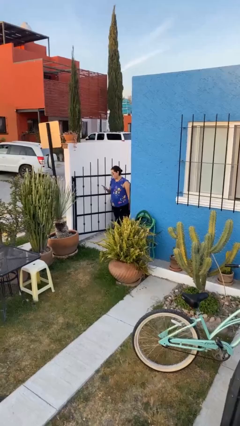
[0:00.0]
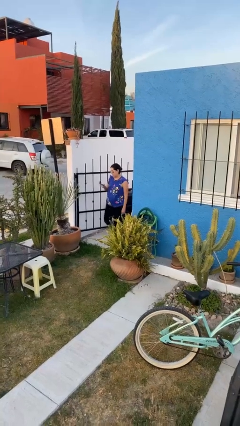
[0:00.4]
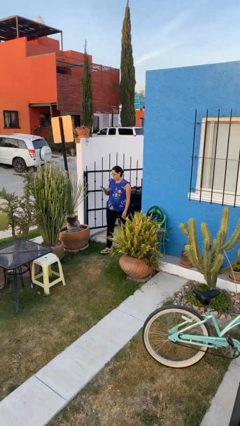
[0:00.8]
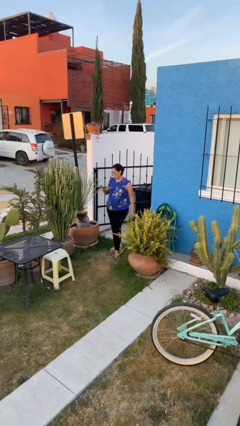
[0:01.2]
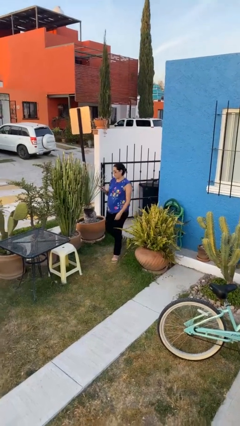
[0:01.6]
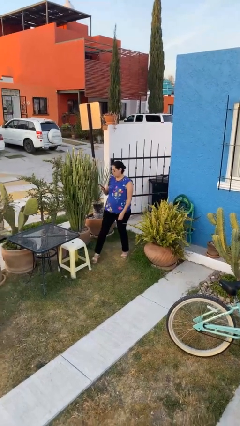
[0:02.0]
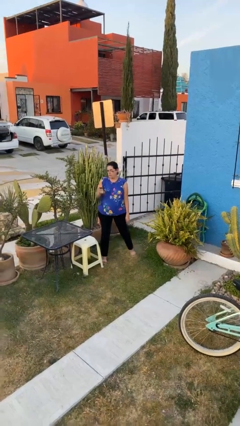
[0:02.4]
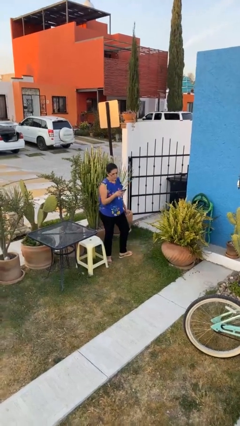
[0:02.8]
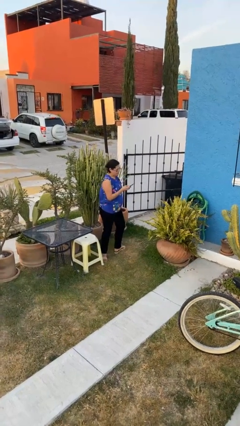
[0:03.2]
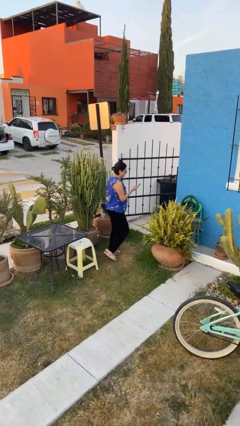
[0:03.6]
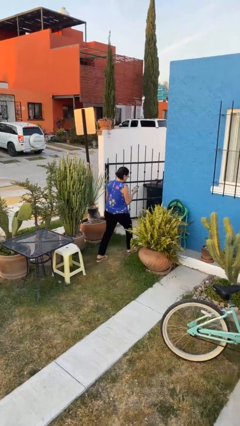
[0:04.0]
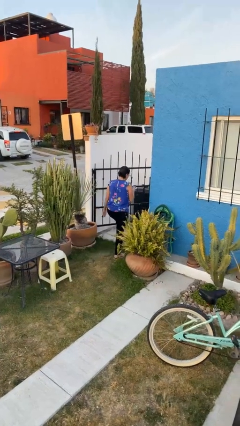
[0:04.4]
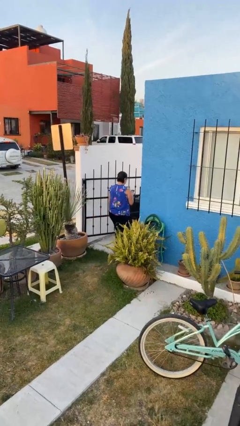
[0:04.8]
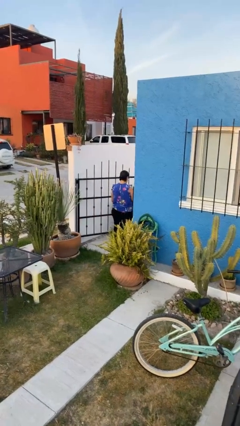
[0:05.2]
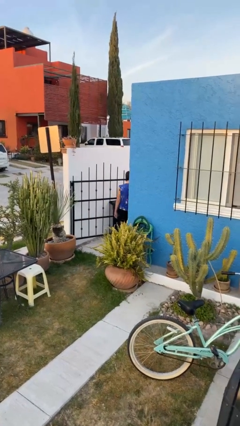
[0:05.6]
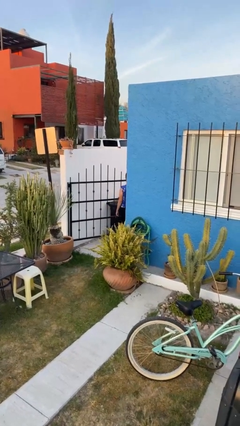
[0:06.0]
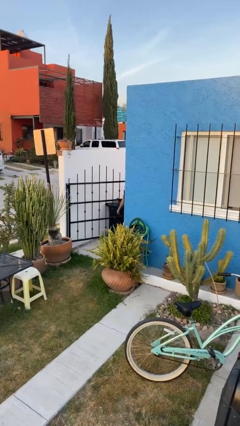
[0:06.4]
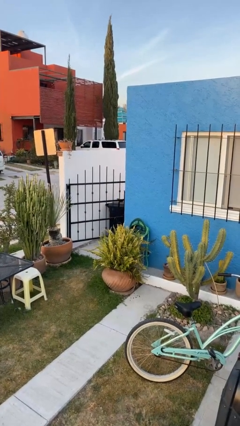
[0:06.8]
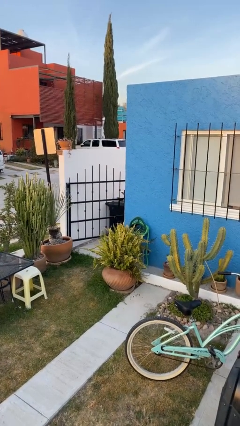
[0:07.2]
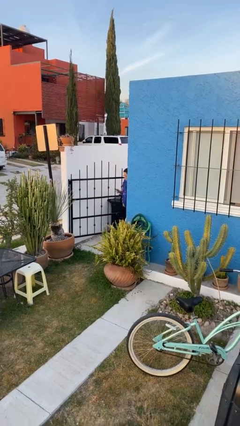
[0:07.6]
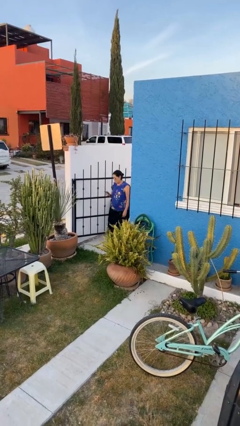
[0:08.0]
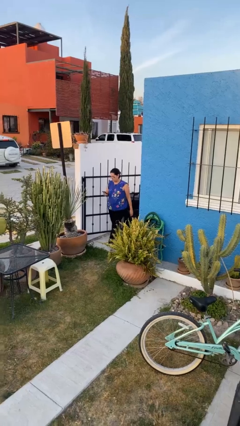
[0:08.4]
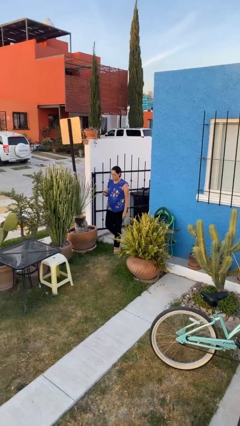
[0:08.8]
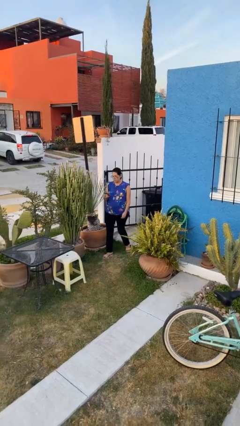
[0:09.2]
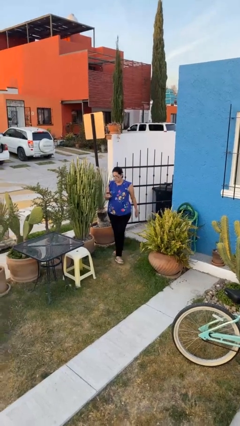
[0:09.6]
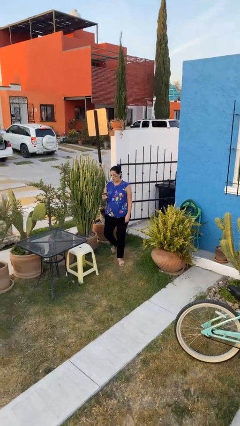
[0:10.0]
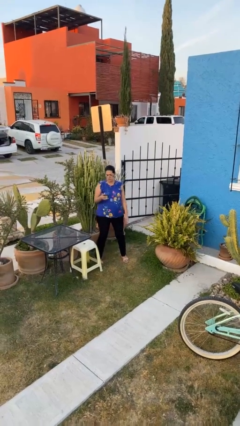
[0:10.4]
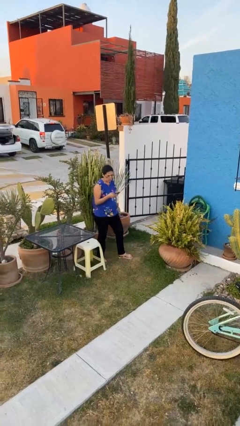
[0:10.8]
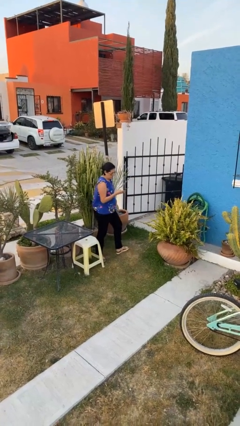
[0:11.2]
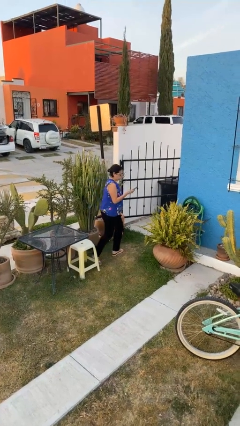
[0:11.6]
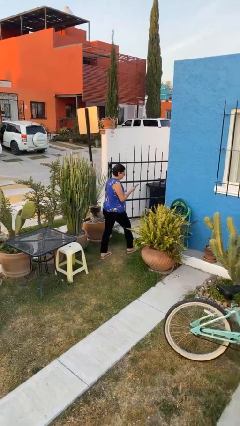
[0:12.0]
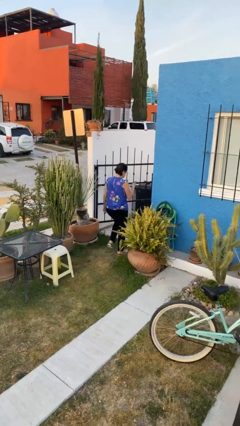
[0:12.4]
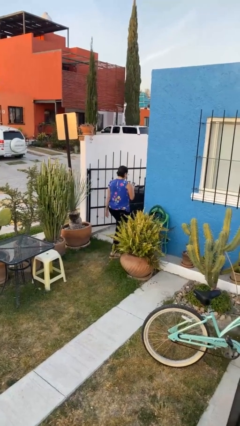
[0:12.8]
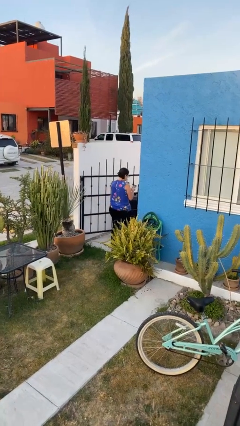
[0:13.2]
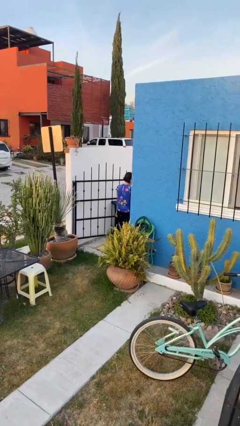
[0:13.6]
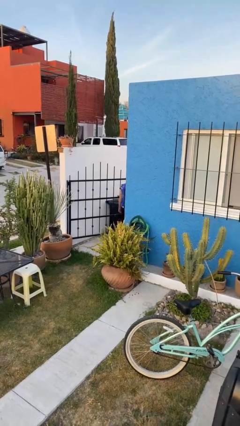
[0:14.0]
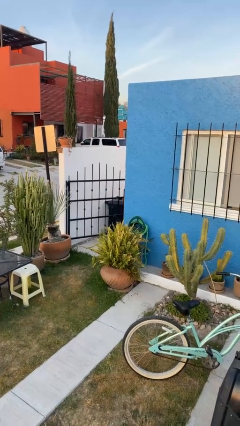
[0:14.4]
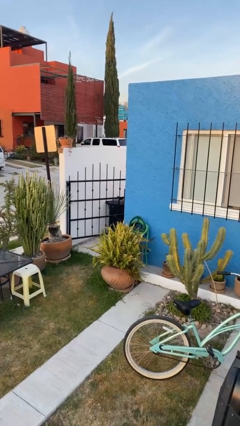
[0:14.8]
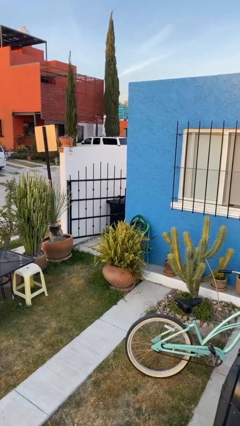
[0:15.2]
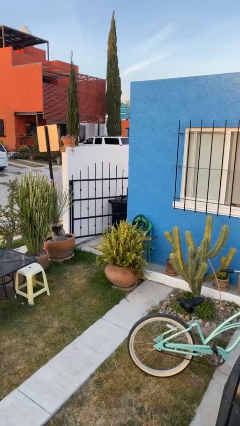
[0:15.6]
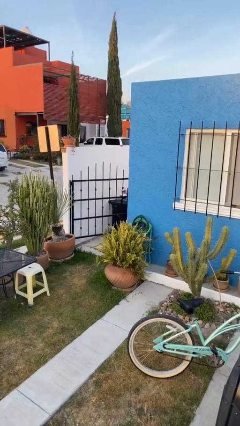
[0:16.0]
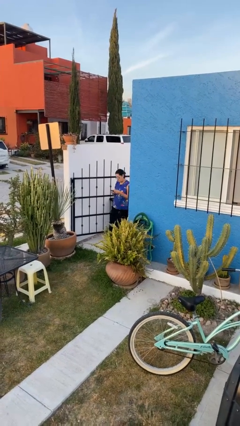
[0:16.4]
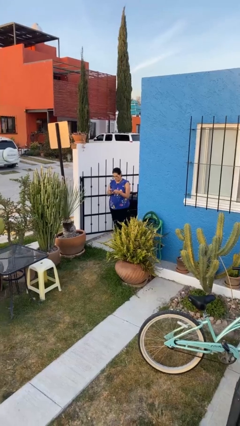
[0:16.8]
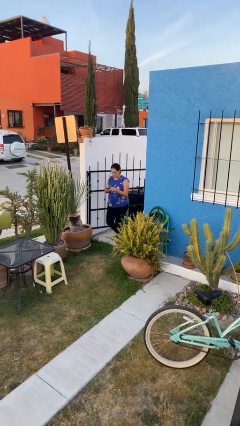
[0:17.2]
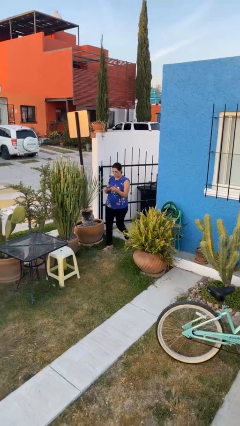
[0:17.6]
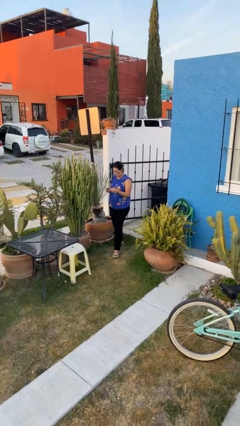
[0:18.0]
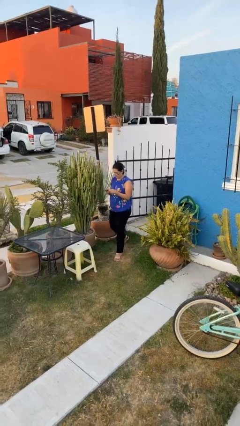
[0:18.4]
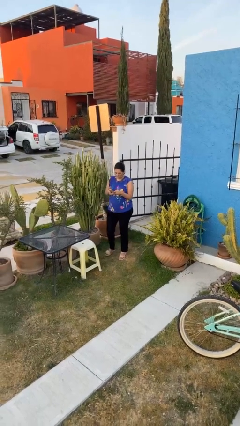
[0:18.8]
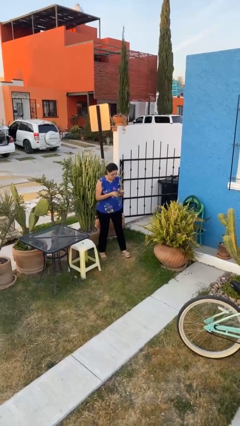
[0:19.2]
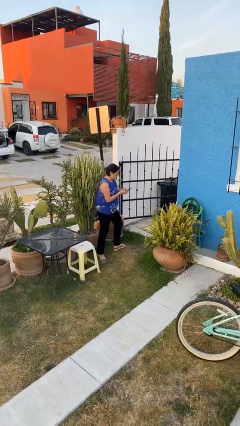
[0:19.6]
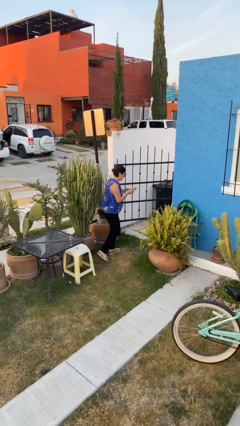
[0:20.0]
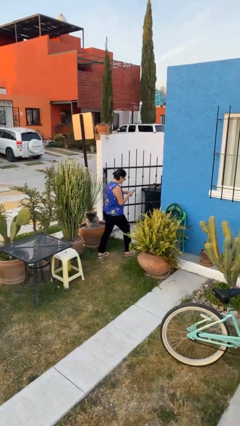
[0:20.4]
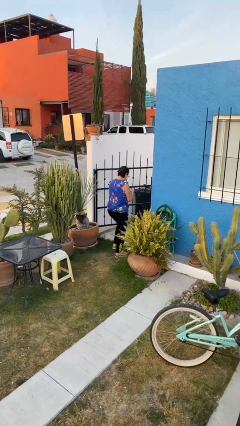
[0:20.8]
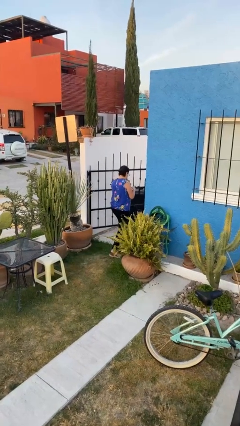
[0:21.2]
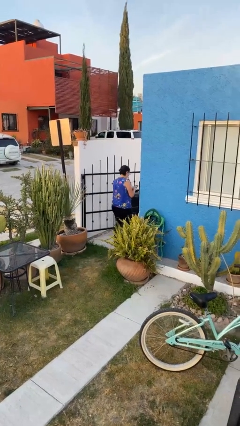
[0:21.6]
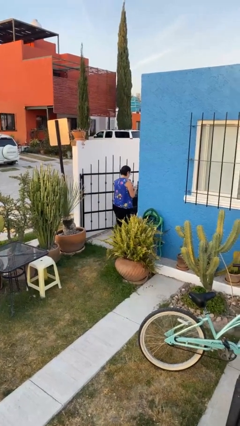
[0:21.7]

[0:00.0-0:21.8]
person texts on phone

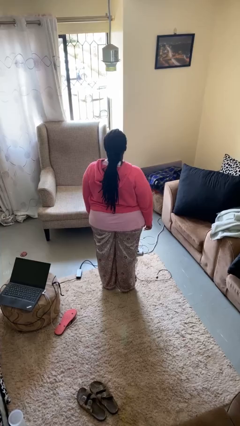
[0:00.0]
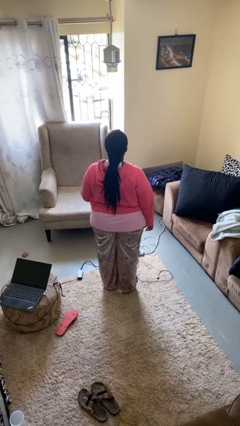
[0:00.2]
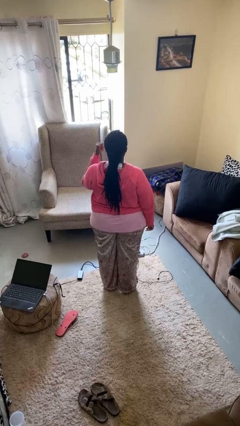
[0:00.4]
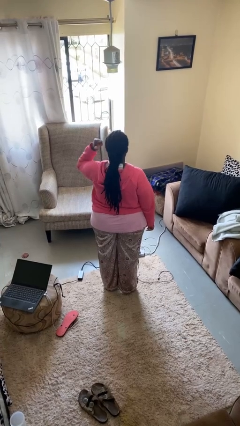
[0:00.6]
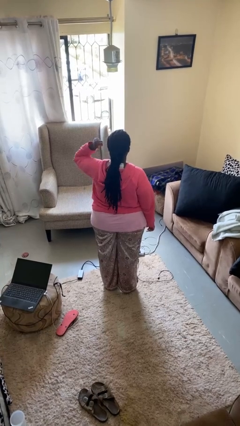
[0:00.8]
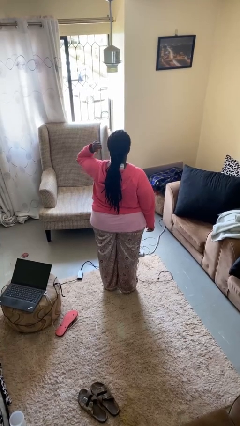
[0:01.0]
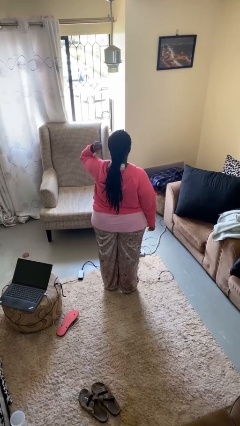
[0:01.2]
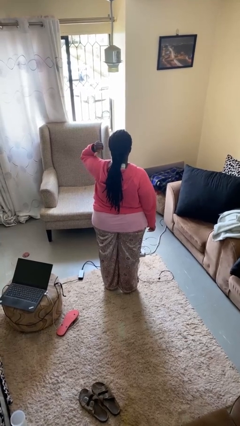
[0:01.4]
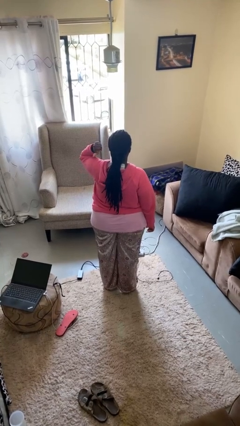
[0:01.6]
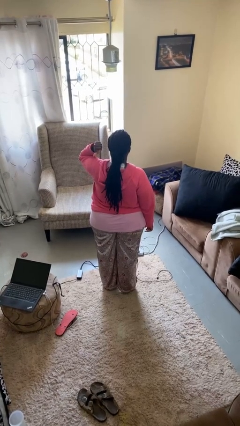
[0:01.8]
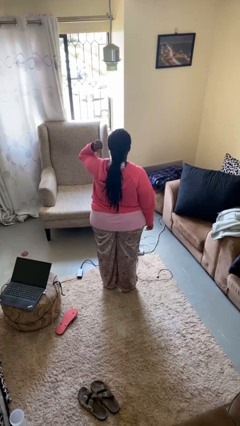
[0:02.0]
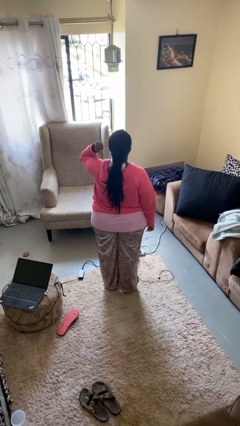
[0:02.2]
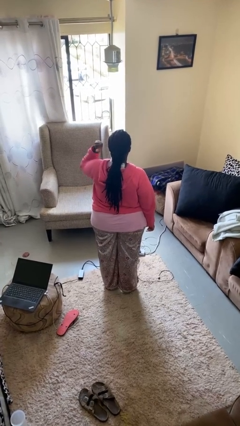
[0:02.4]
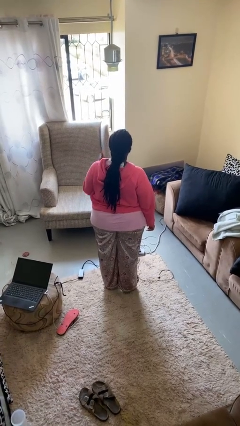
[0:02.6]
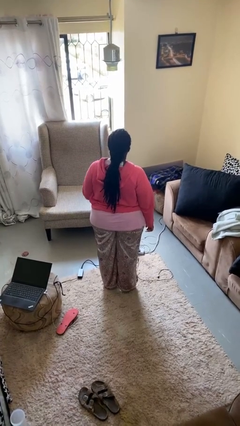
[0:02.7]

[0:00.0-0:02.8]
person gestures behind me

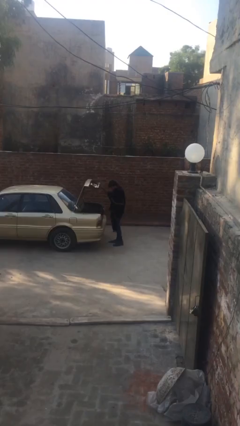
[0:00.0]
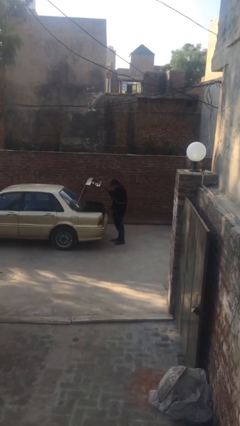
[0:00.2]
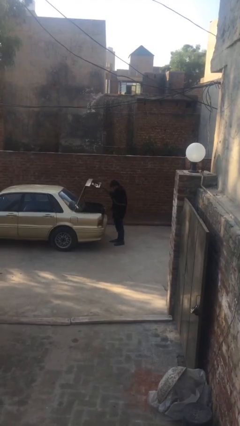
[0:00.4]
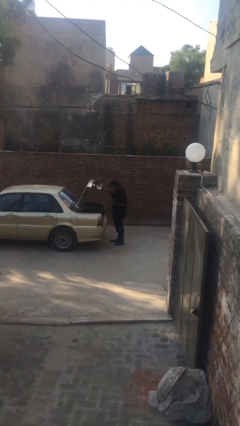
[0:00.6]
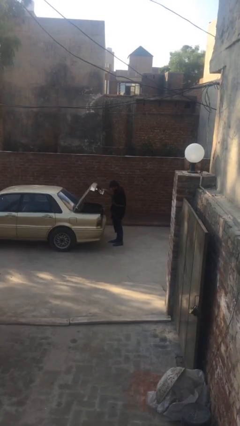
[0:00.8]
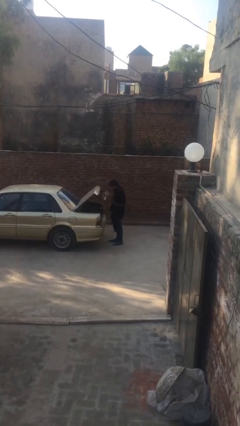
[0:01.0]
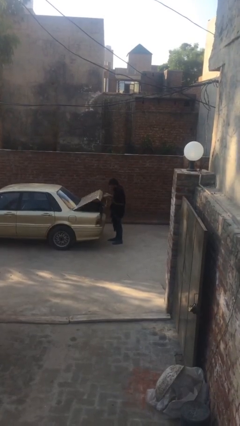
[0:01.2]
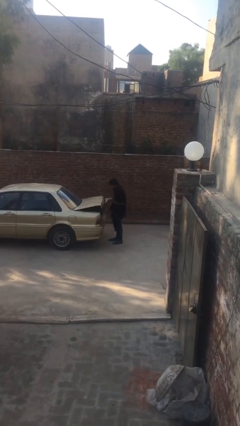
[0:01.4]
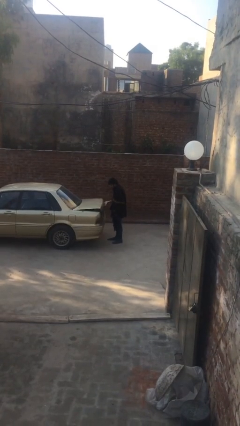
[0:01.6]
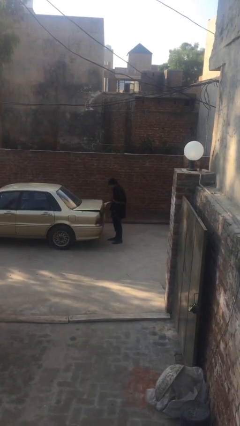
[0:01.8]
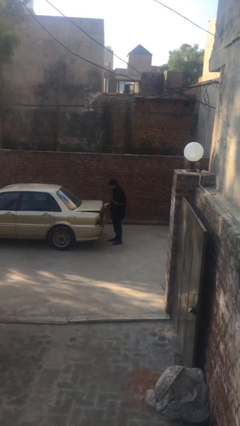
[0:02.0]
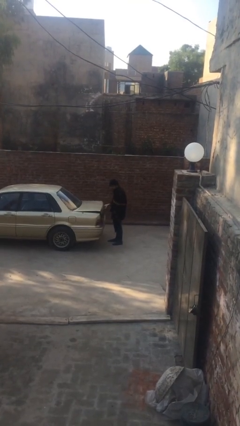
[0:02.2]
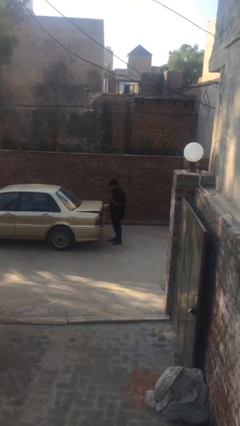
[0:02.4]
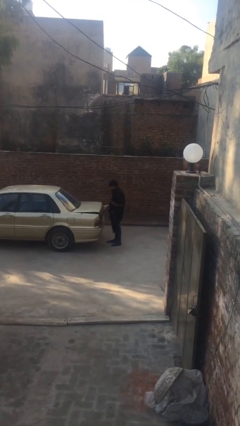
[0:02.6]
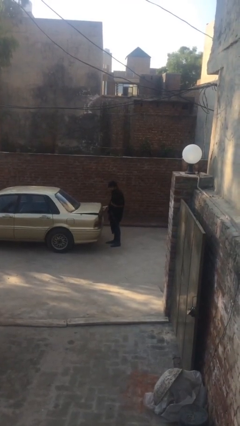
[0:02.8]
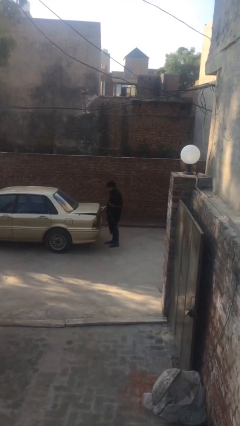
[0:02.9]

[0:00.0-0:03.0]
person closes car trunk

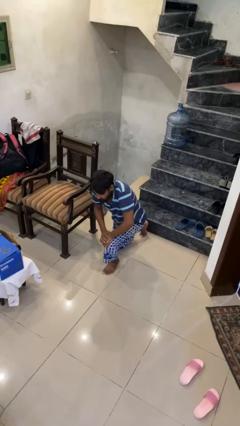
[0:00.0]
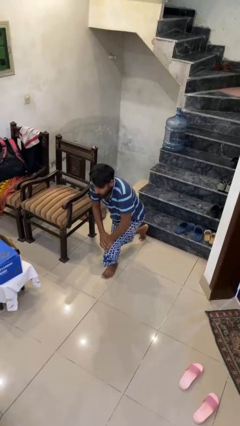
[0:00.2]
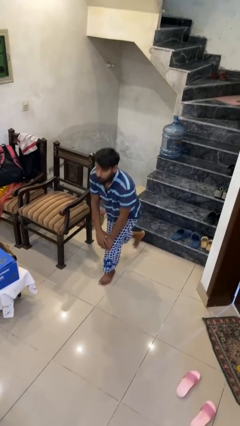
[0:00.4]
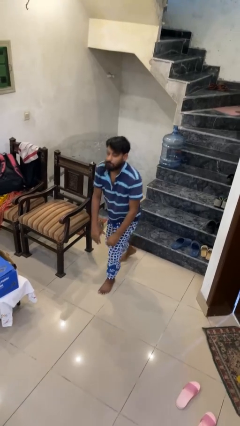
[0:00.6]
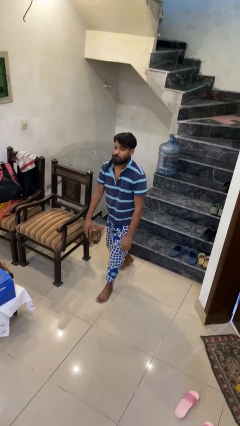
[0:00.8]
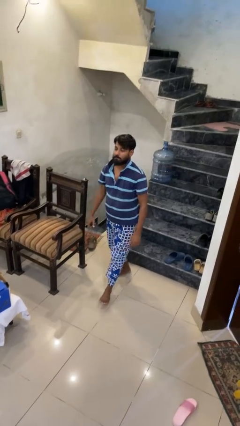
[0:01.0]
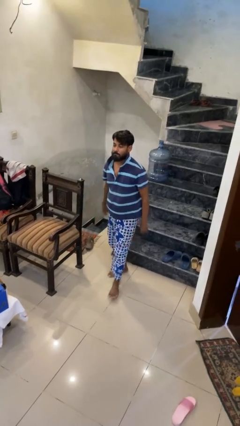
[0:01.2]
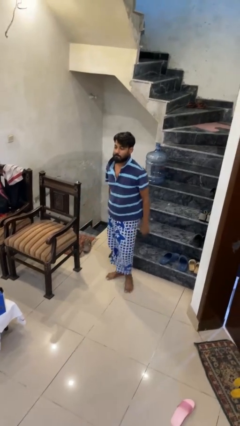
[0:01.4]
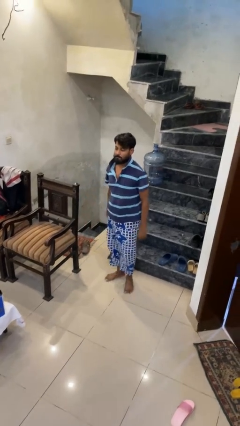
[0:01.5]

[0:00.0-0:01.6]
person stands up from floor
